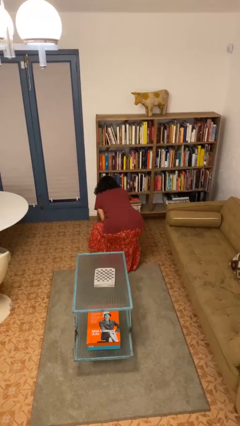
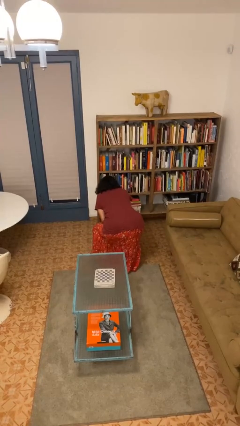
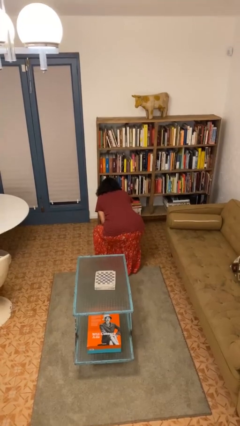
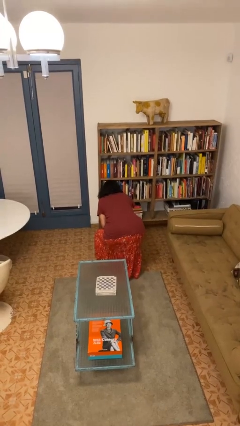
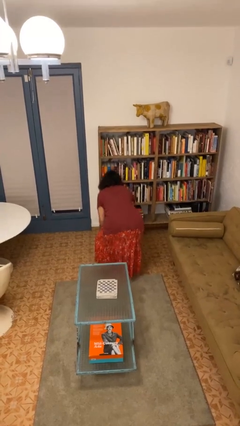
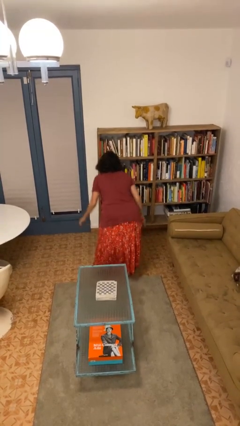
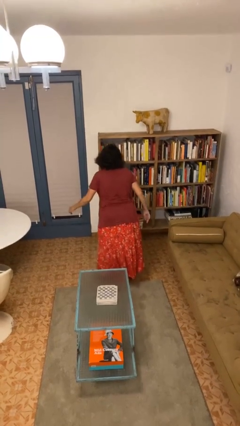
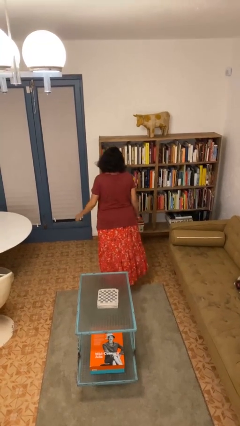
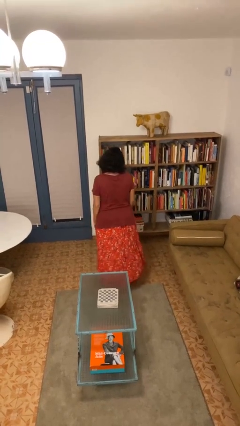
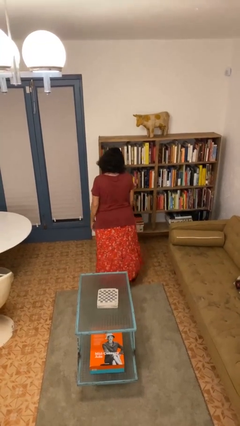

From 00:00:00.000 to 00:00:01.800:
person stands up

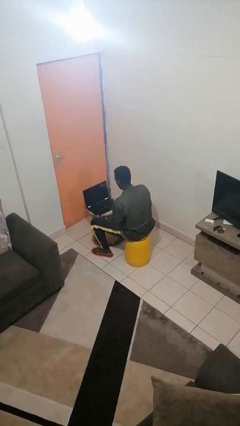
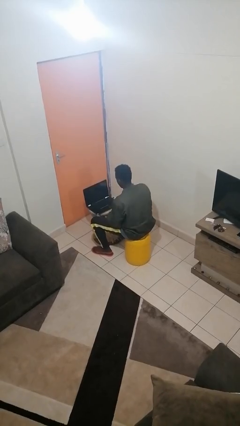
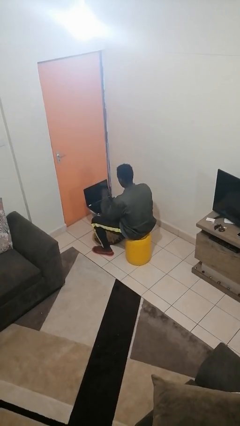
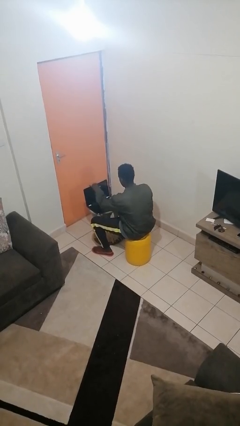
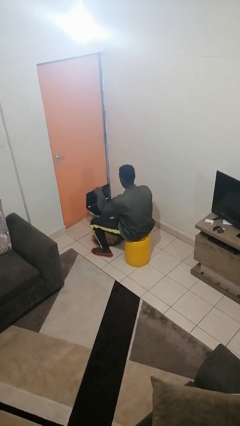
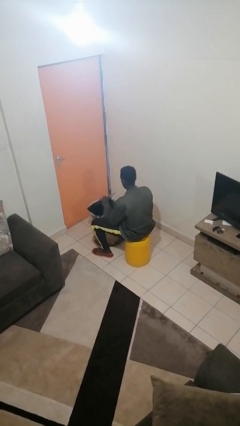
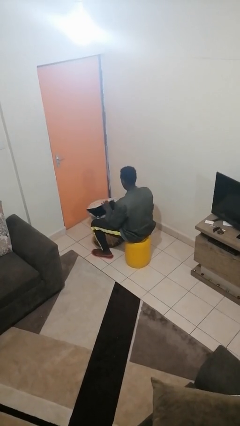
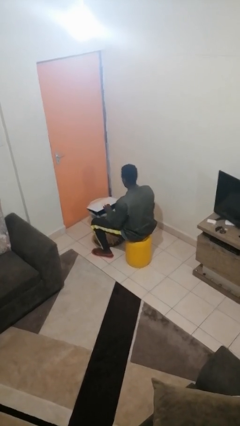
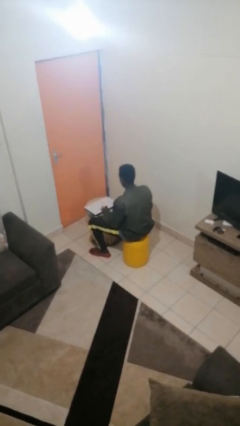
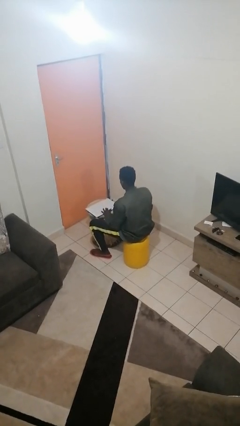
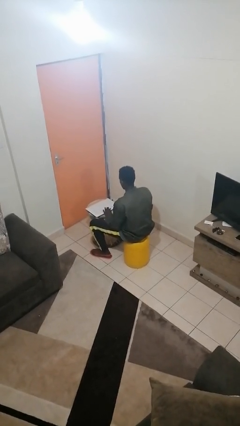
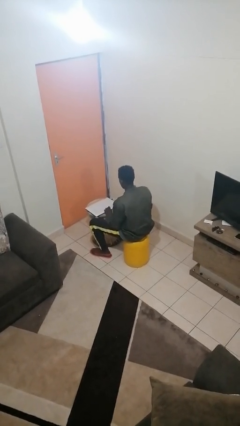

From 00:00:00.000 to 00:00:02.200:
person closes laptop

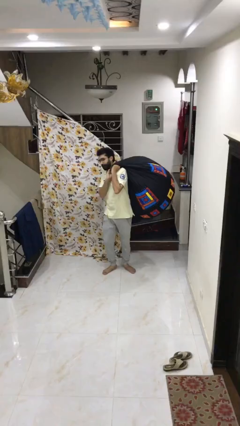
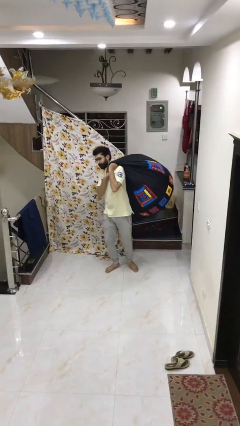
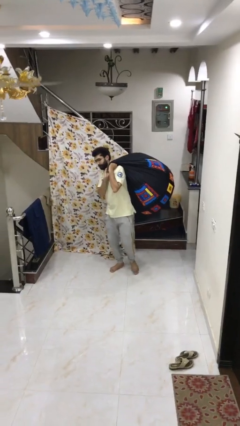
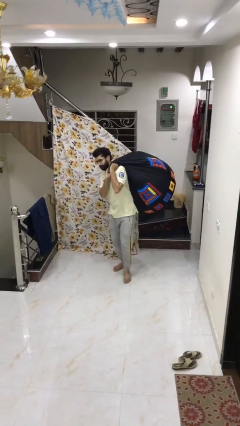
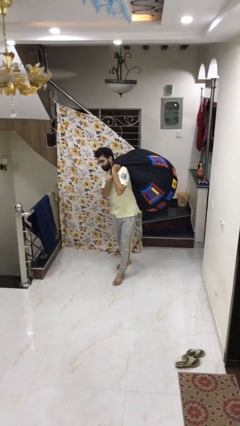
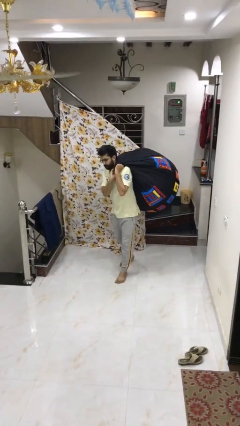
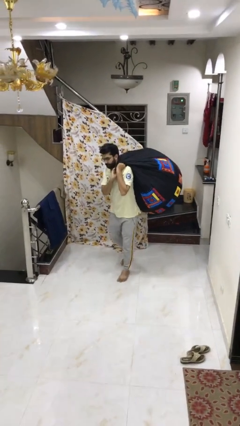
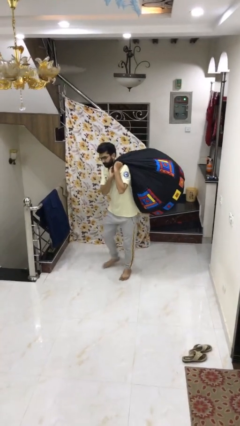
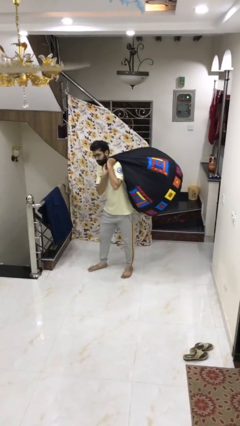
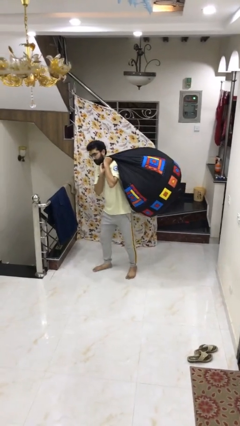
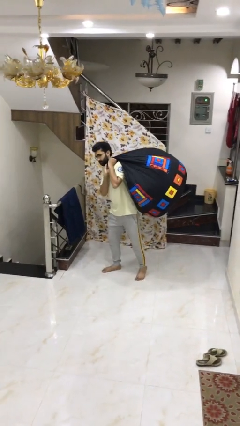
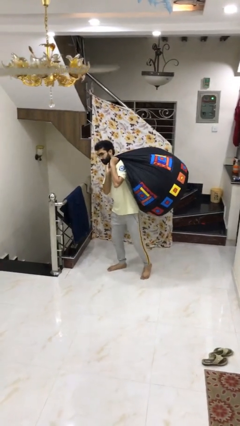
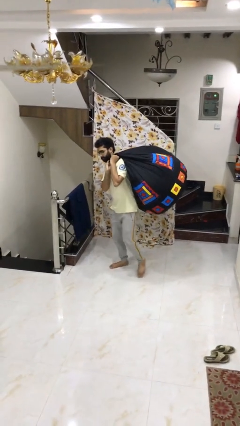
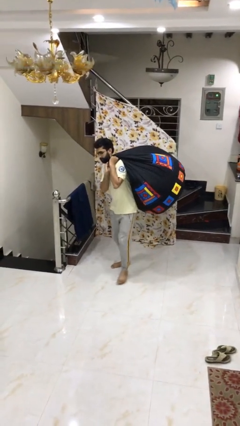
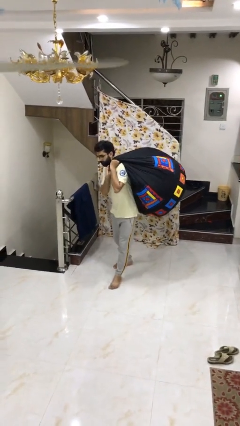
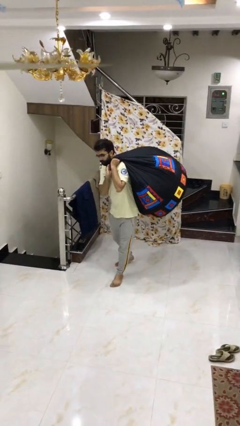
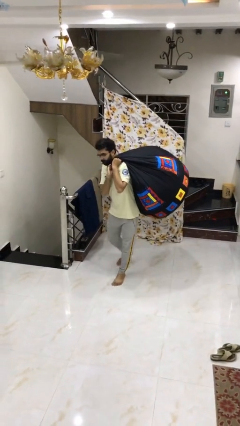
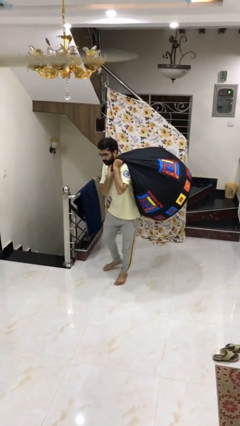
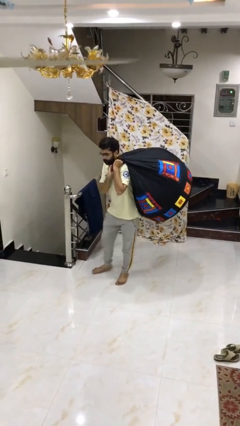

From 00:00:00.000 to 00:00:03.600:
person carries heavy object

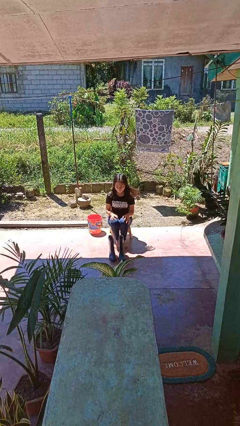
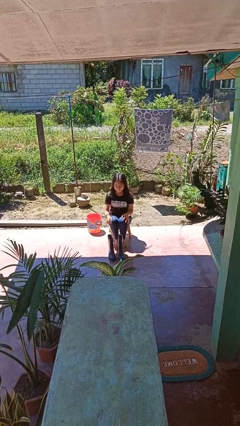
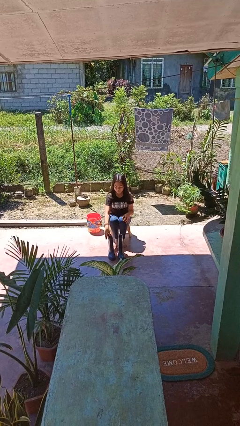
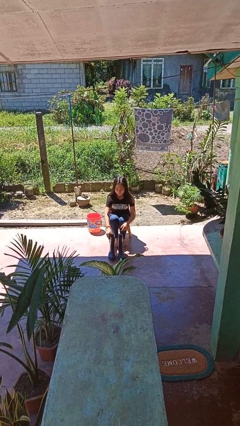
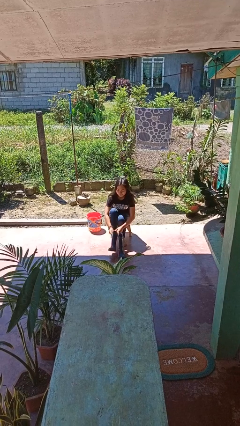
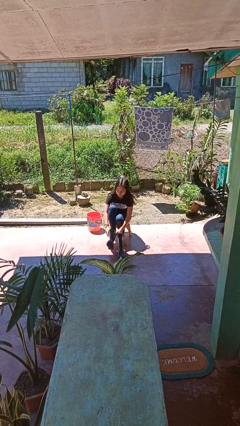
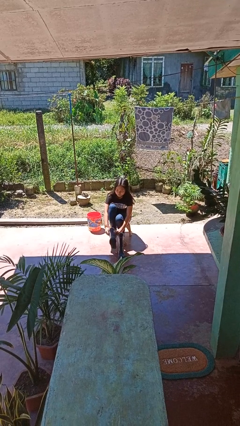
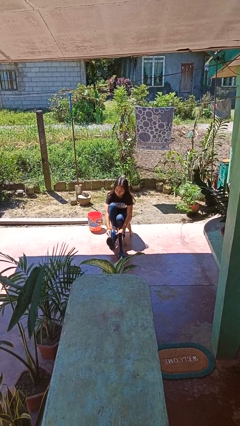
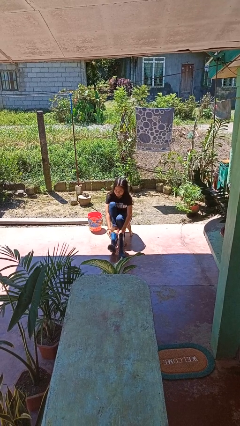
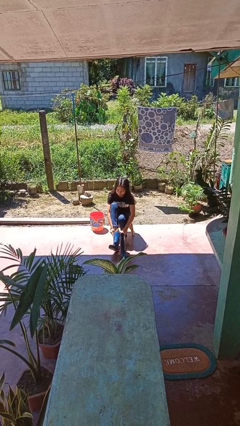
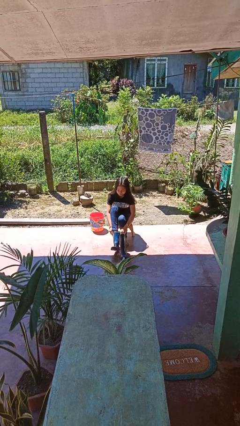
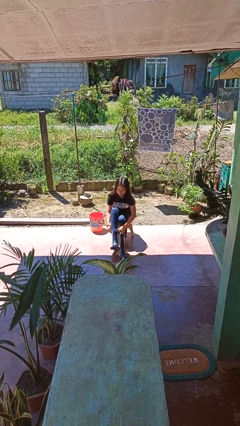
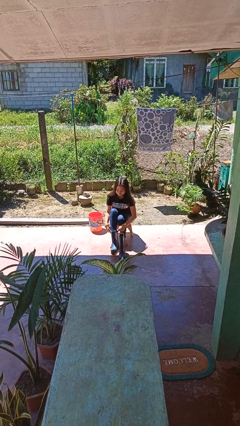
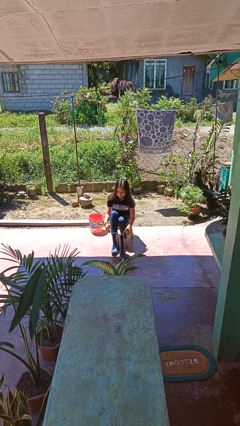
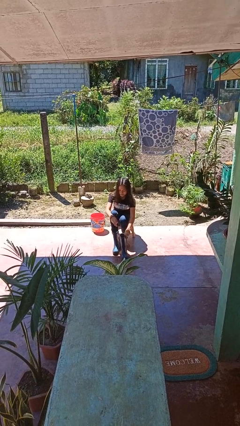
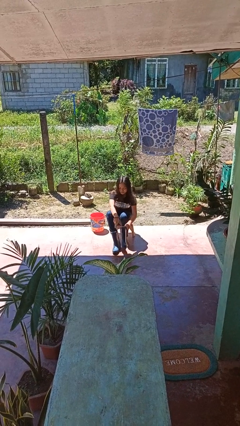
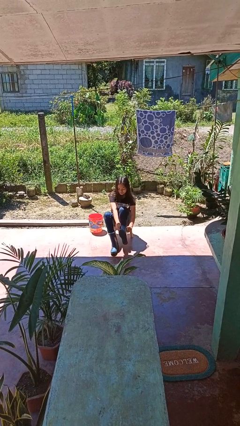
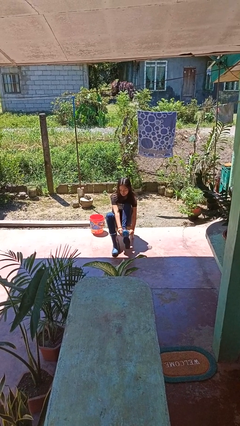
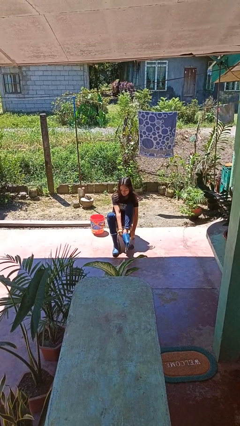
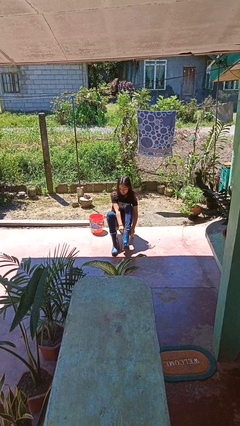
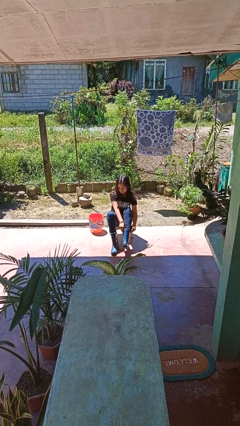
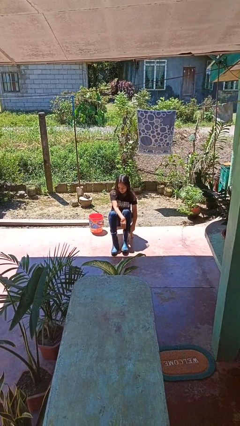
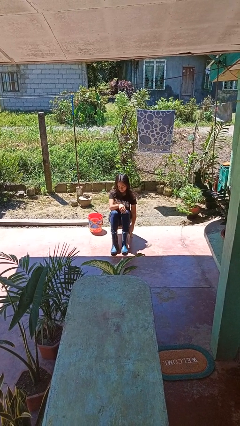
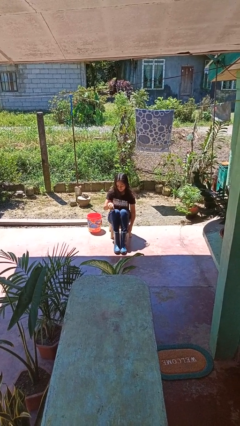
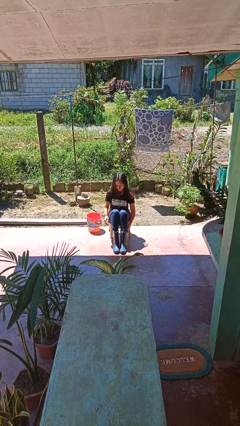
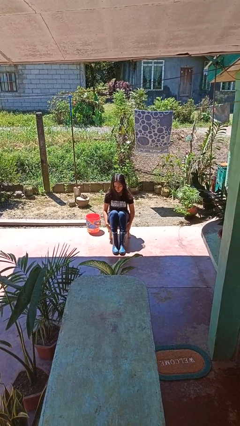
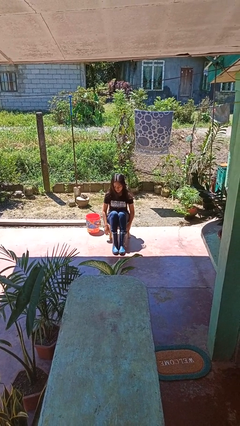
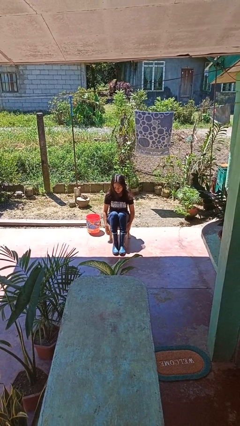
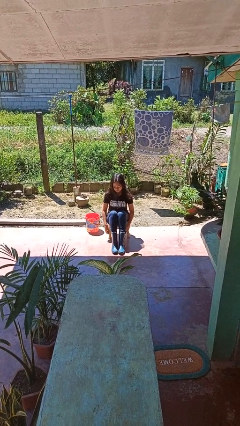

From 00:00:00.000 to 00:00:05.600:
person puts on boots

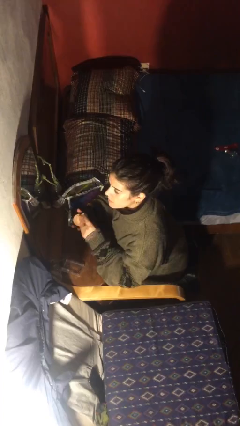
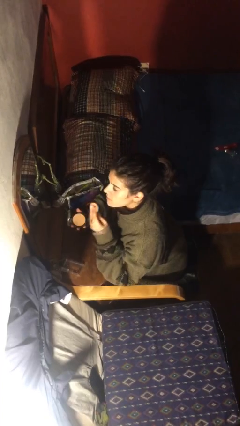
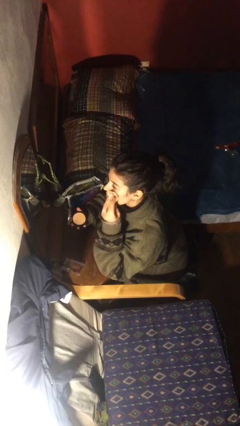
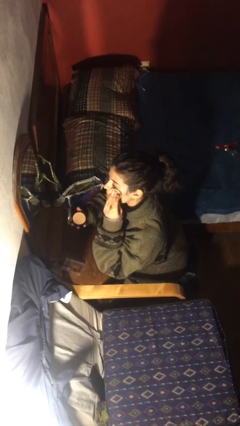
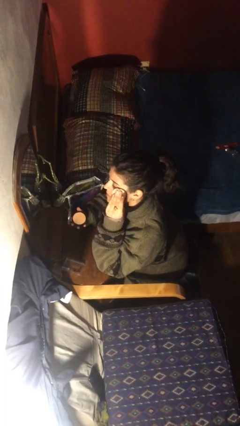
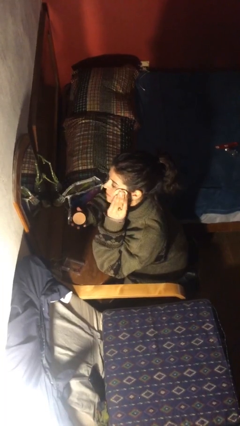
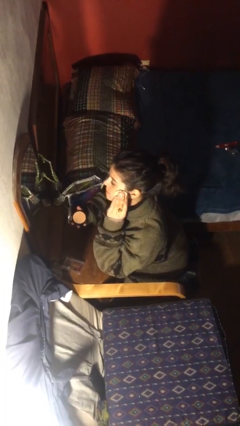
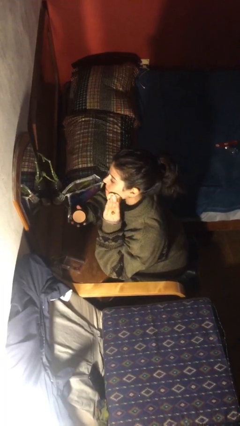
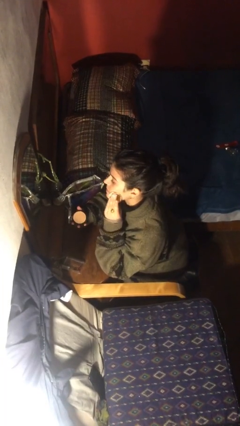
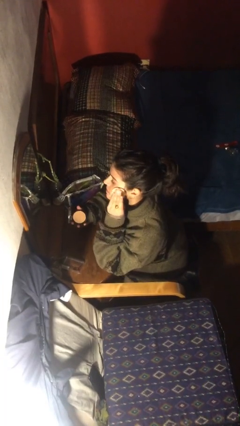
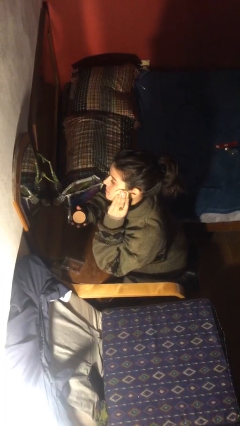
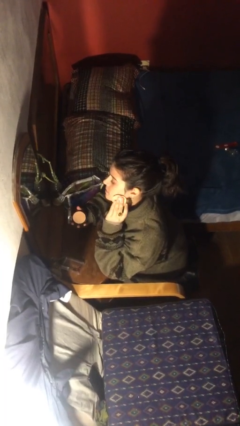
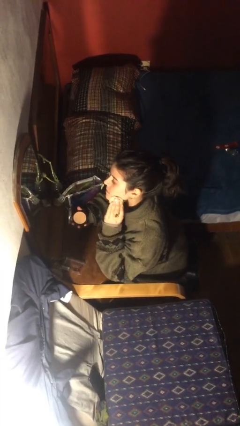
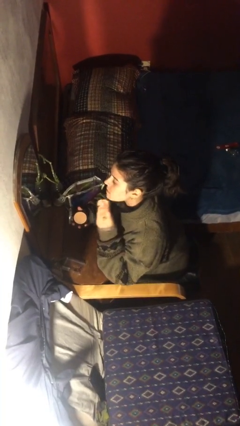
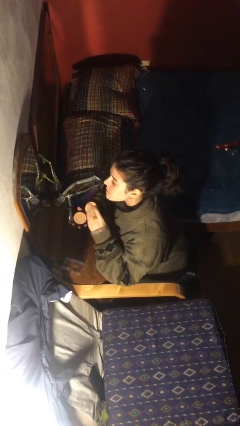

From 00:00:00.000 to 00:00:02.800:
person applies foundation makeup

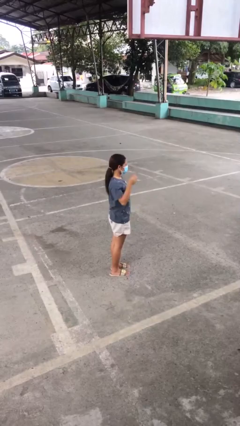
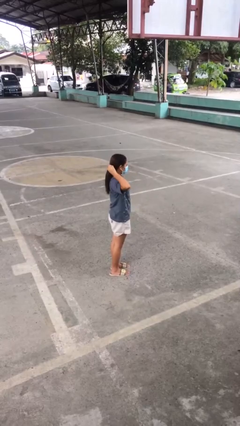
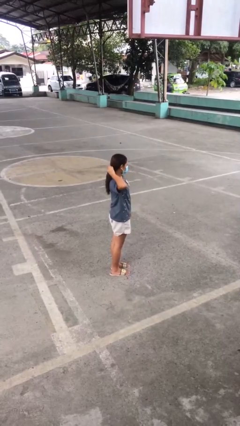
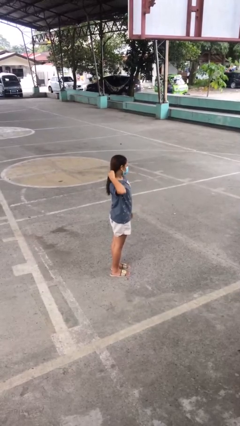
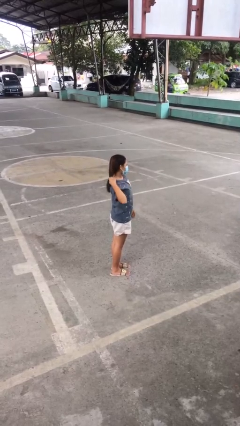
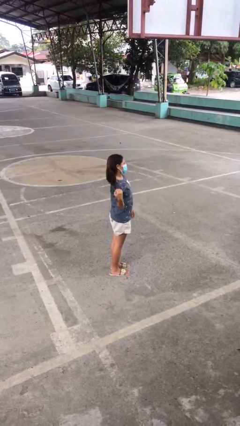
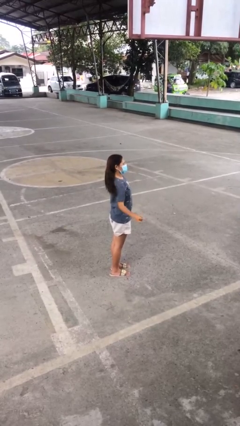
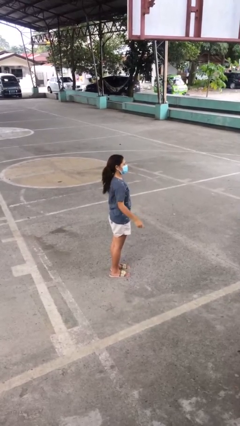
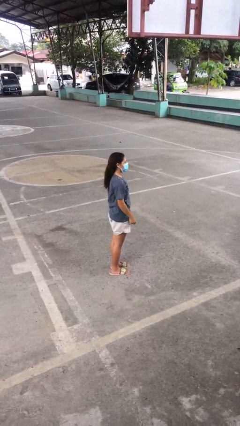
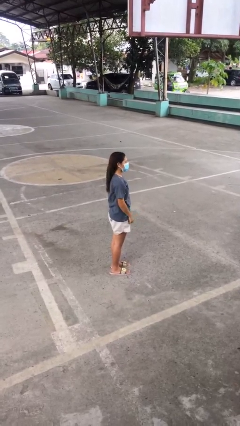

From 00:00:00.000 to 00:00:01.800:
person takes off hairtie
